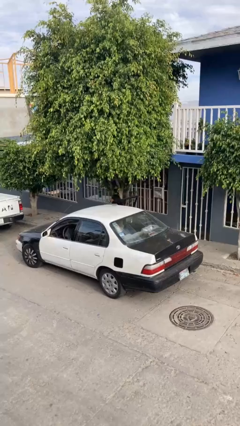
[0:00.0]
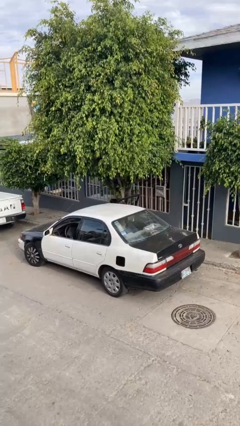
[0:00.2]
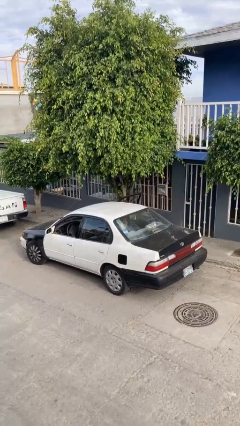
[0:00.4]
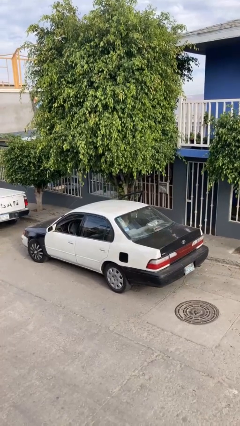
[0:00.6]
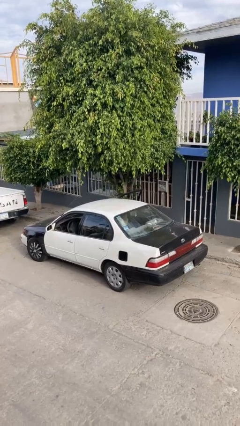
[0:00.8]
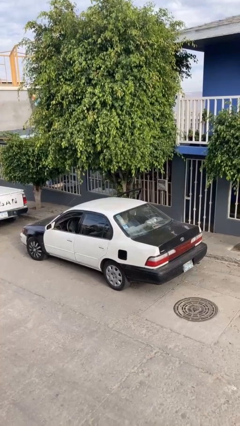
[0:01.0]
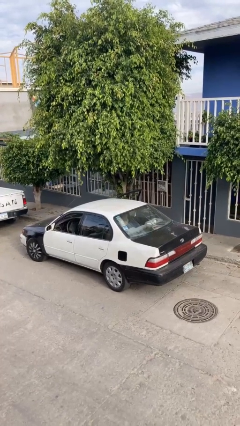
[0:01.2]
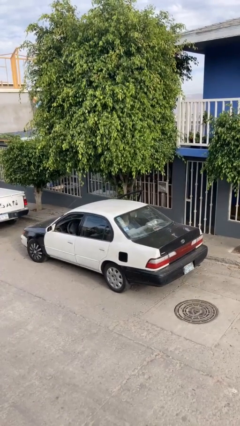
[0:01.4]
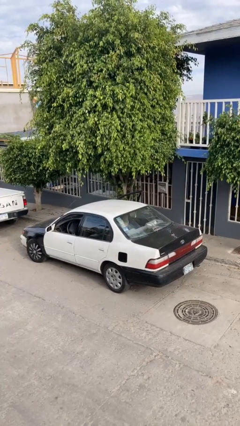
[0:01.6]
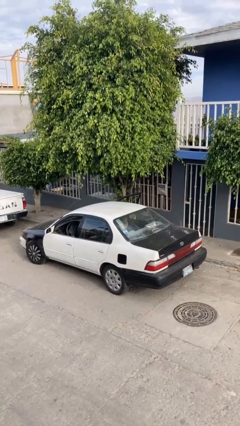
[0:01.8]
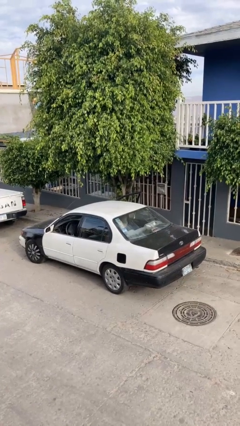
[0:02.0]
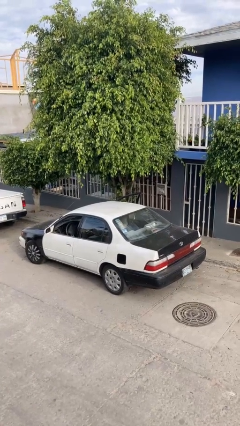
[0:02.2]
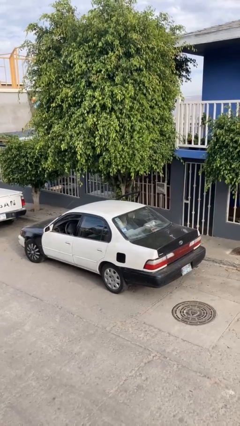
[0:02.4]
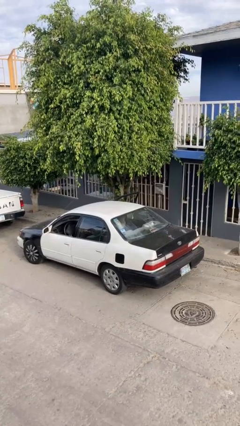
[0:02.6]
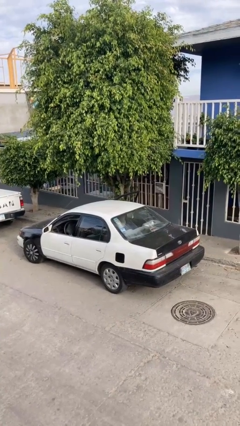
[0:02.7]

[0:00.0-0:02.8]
person enters car

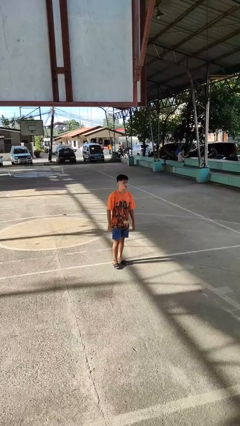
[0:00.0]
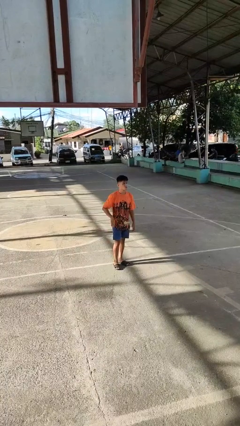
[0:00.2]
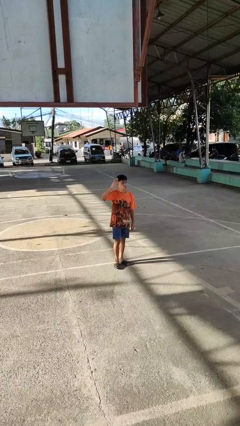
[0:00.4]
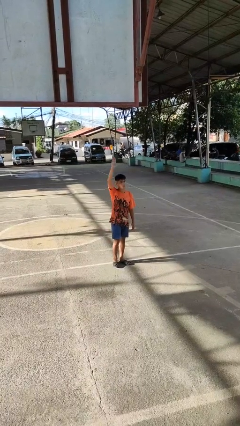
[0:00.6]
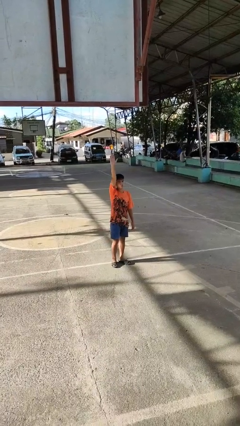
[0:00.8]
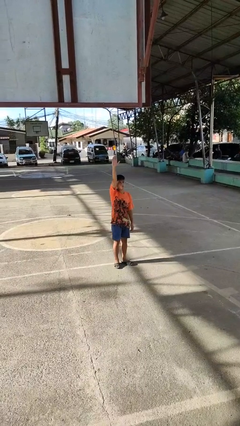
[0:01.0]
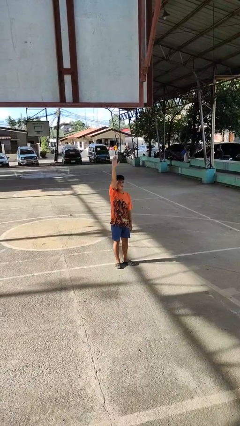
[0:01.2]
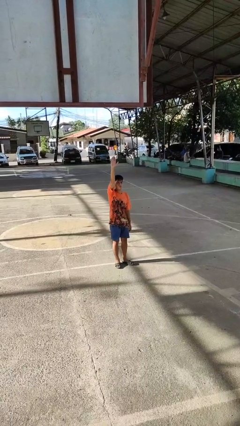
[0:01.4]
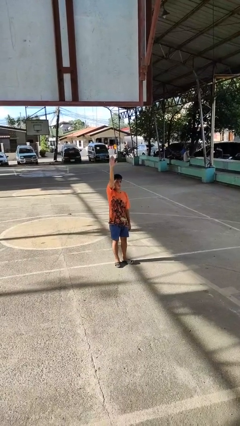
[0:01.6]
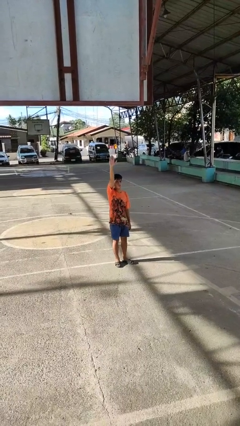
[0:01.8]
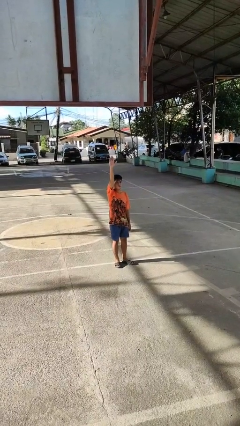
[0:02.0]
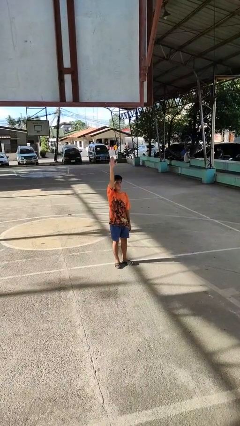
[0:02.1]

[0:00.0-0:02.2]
person gestures raise hand

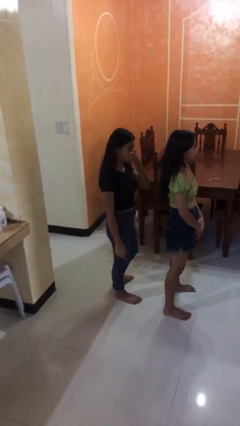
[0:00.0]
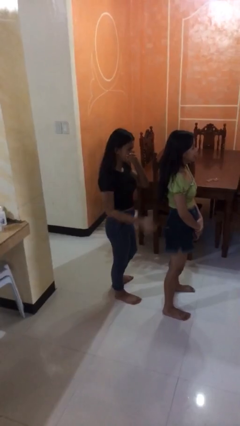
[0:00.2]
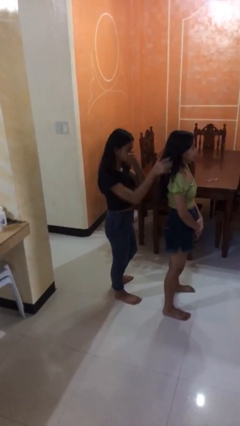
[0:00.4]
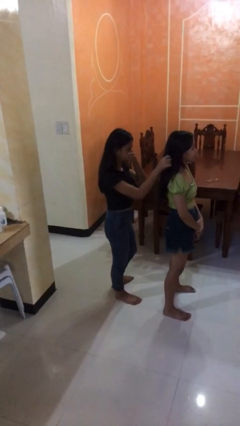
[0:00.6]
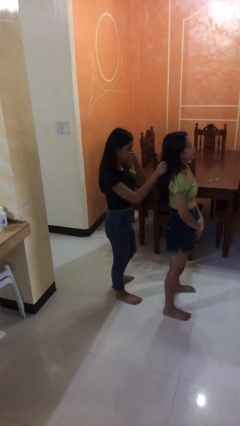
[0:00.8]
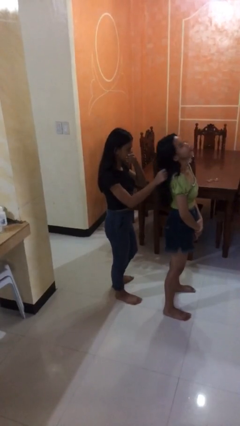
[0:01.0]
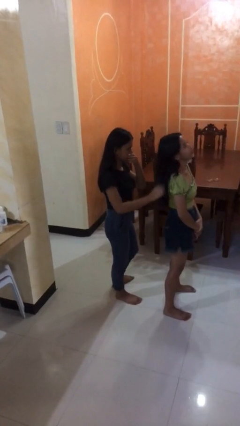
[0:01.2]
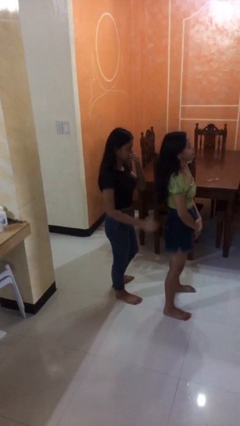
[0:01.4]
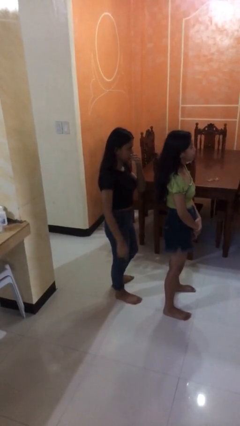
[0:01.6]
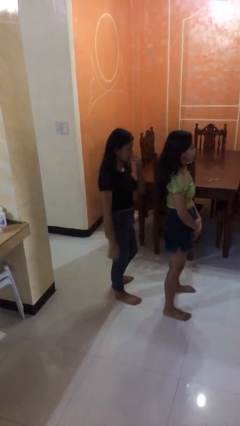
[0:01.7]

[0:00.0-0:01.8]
person grabs person by hair

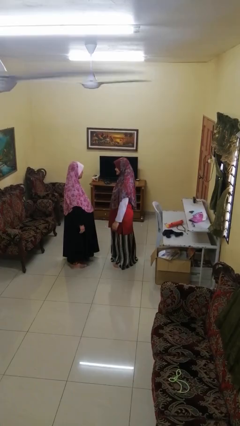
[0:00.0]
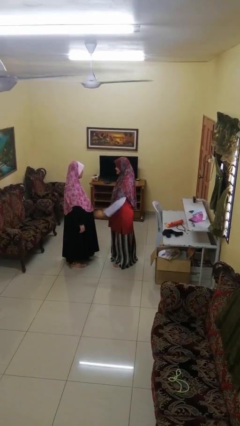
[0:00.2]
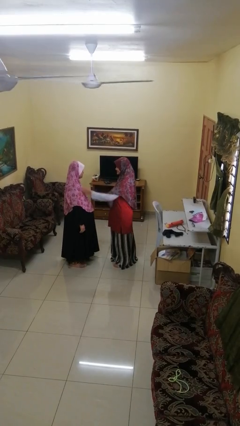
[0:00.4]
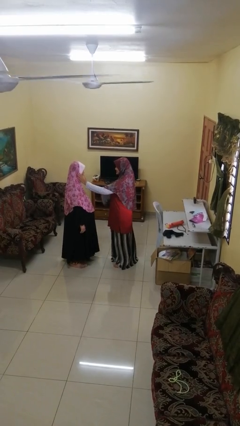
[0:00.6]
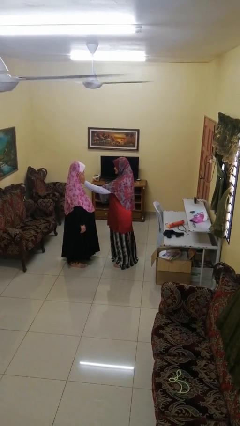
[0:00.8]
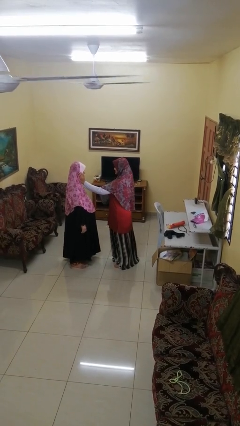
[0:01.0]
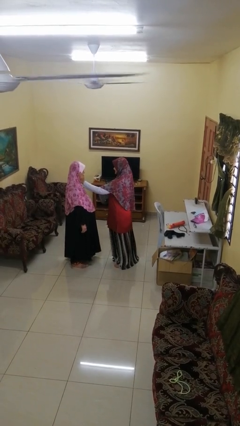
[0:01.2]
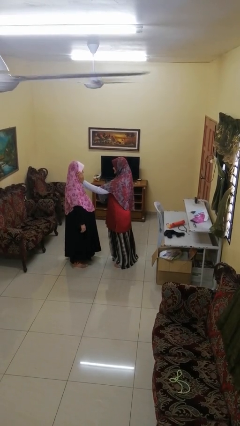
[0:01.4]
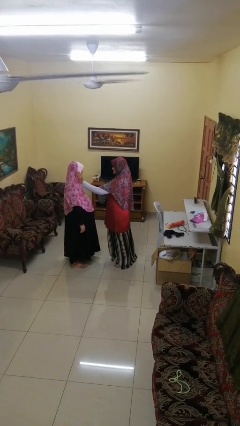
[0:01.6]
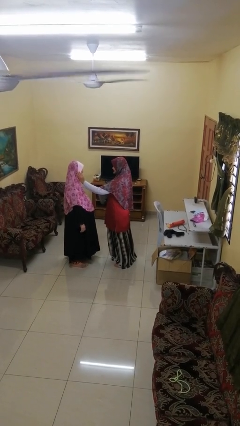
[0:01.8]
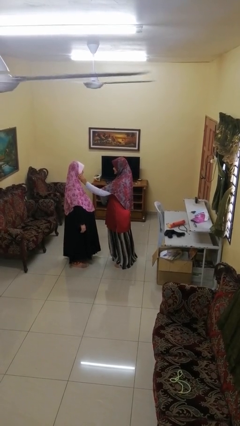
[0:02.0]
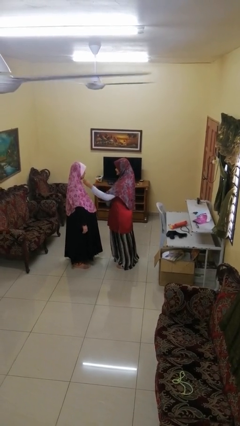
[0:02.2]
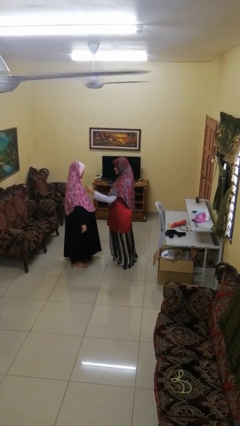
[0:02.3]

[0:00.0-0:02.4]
person touches face of person

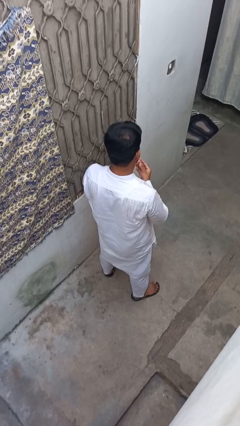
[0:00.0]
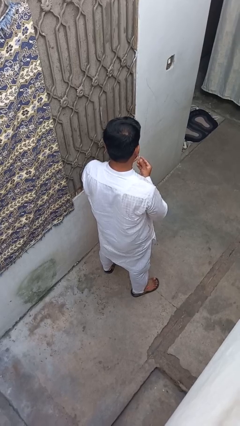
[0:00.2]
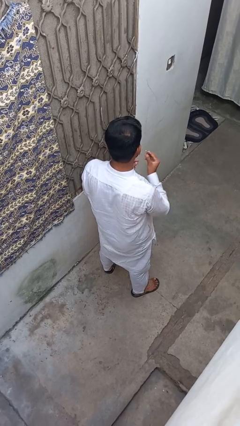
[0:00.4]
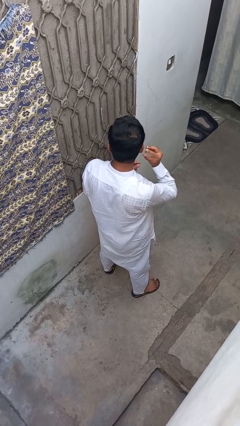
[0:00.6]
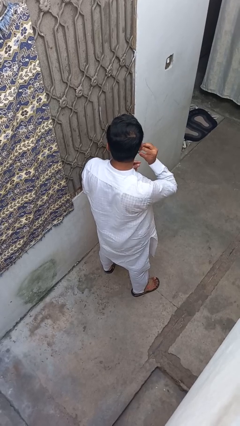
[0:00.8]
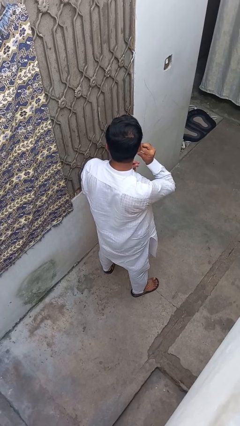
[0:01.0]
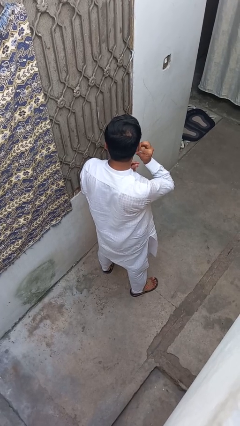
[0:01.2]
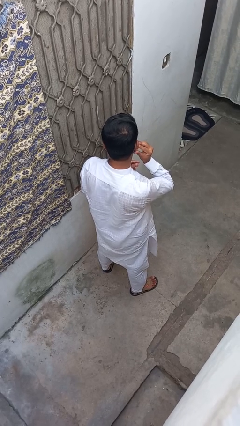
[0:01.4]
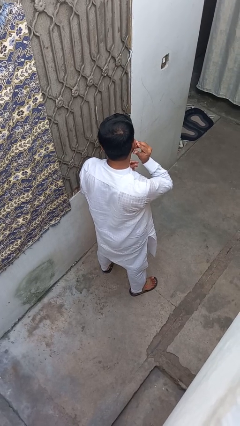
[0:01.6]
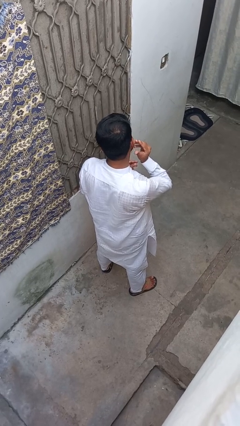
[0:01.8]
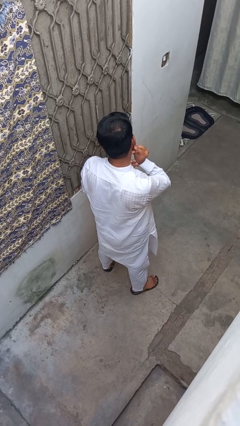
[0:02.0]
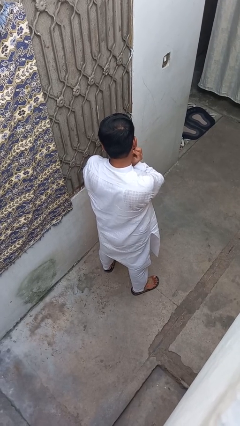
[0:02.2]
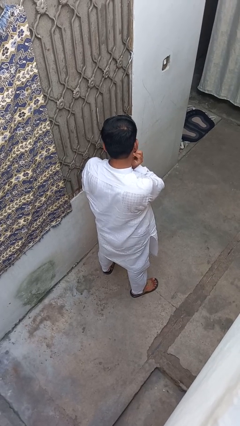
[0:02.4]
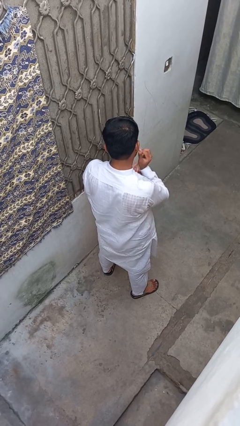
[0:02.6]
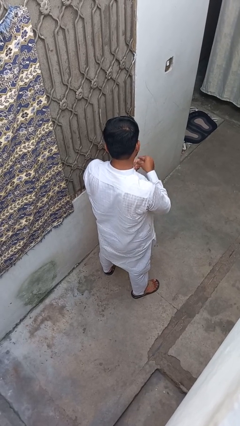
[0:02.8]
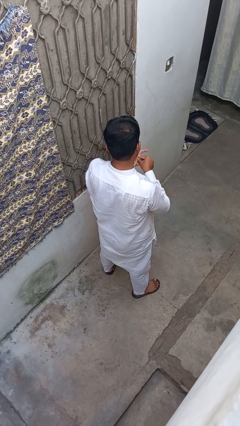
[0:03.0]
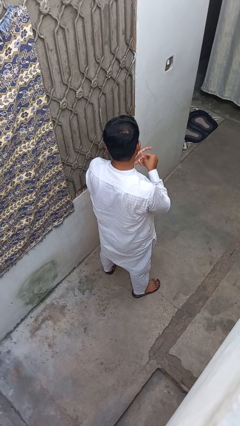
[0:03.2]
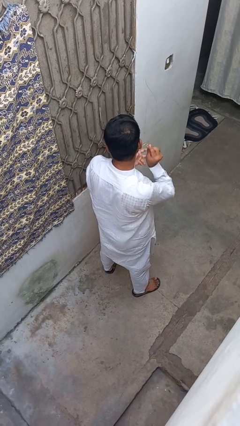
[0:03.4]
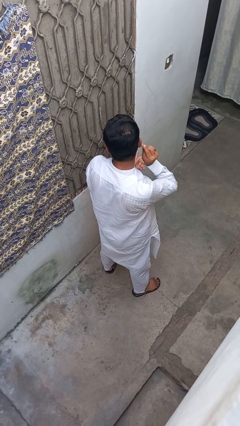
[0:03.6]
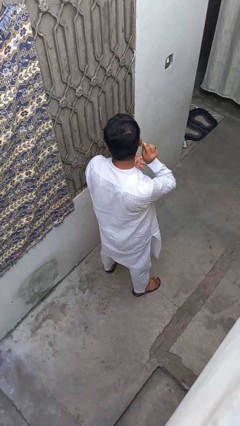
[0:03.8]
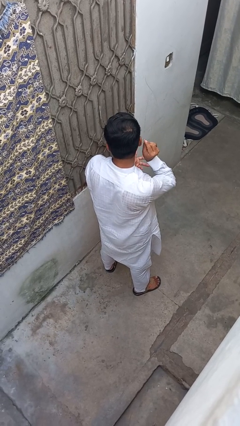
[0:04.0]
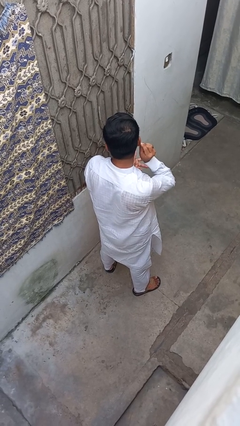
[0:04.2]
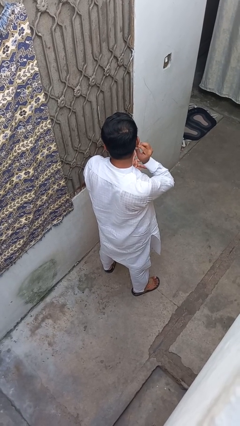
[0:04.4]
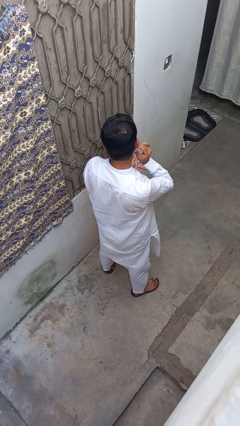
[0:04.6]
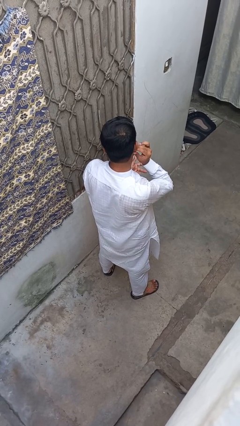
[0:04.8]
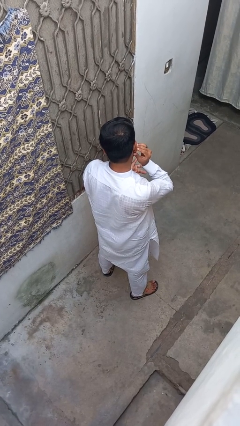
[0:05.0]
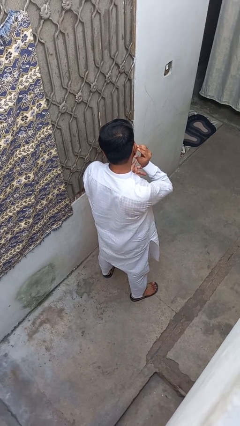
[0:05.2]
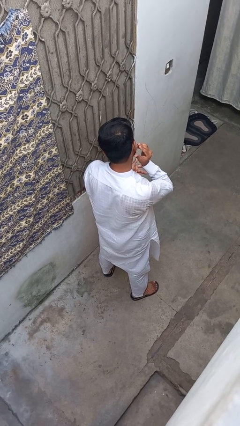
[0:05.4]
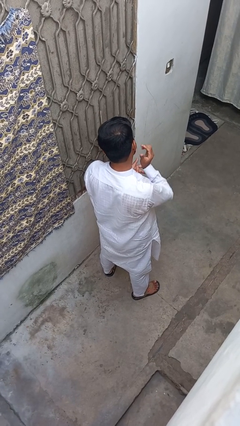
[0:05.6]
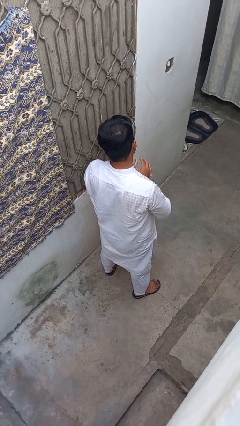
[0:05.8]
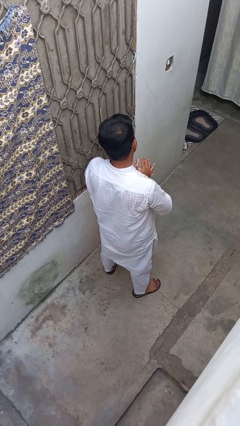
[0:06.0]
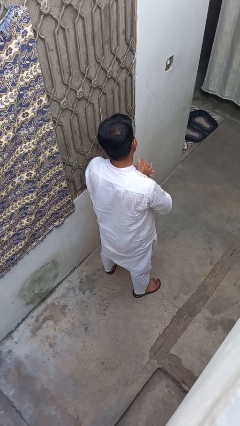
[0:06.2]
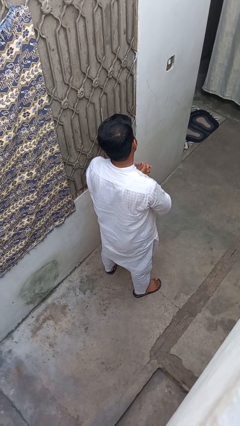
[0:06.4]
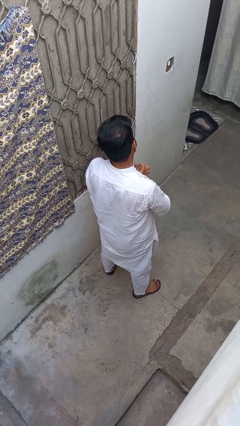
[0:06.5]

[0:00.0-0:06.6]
person puts on earrings

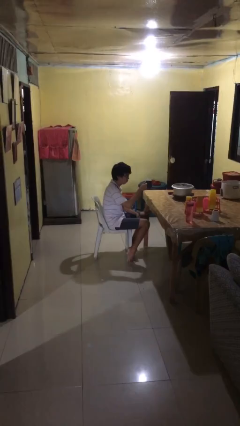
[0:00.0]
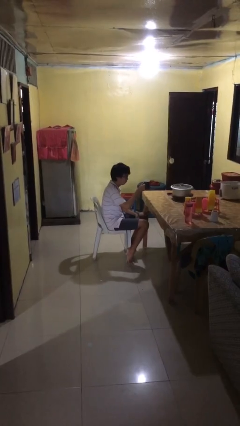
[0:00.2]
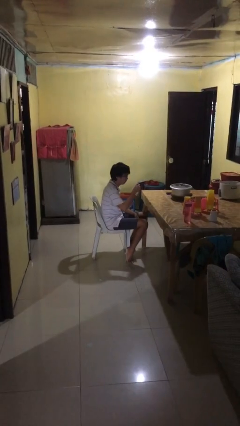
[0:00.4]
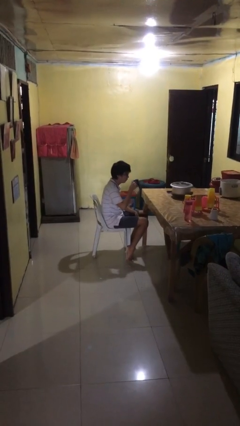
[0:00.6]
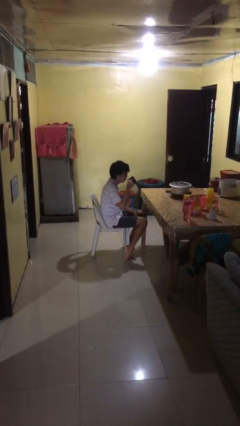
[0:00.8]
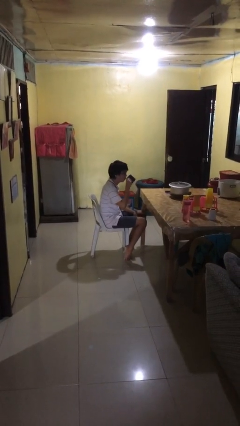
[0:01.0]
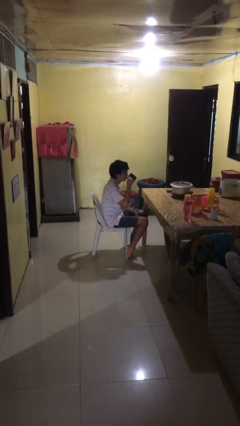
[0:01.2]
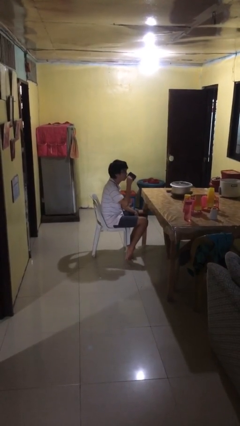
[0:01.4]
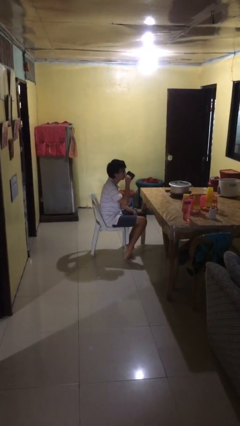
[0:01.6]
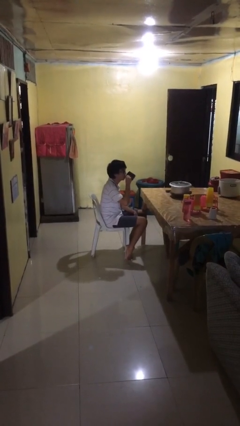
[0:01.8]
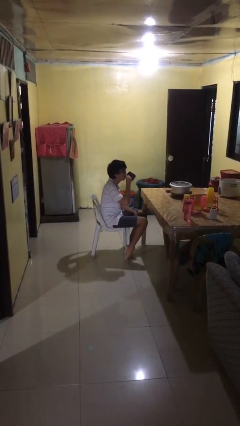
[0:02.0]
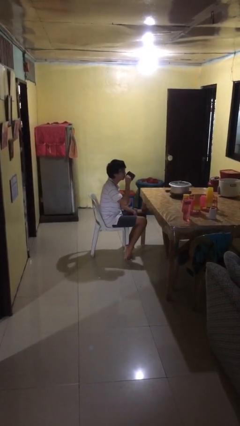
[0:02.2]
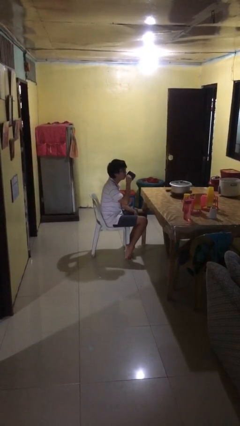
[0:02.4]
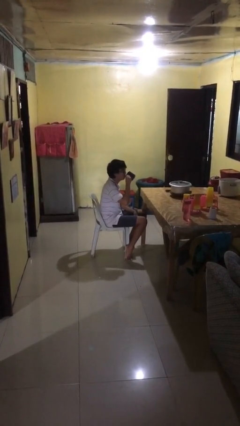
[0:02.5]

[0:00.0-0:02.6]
person drinks from mug
